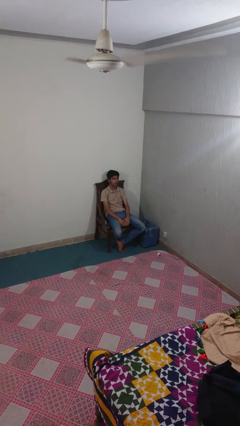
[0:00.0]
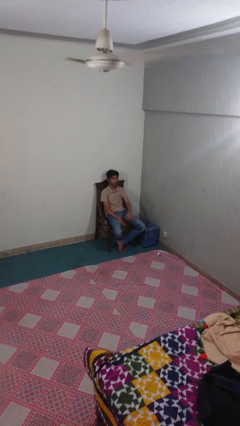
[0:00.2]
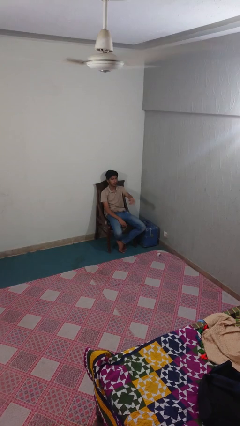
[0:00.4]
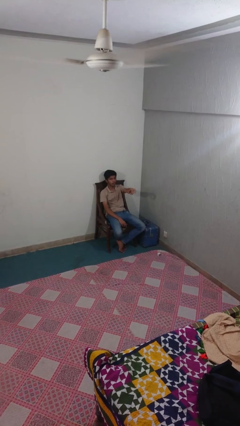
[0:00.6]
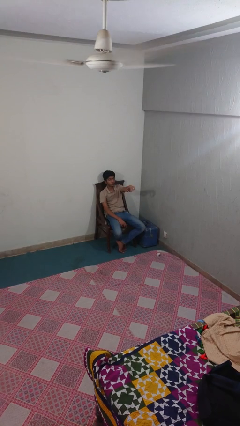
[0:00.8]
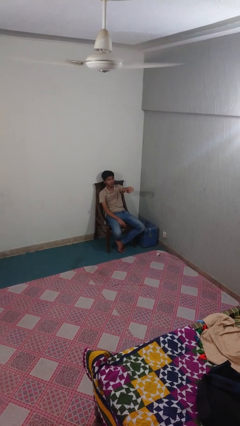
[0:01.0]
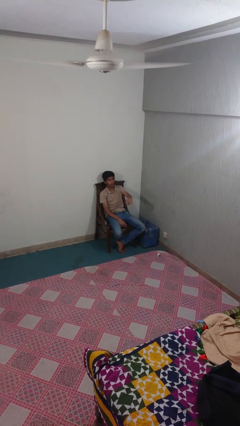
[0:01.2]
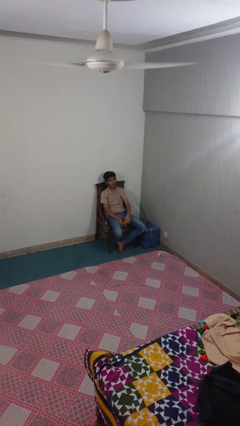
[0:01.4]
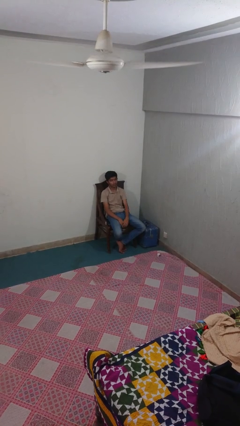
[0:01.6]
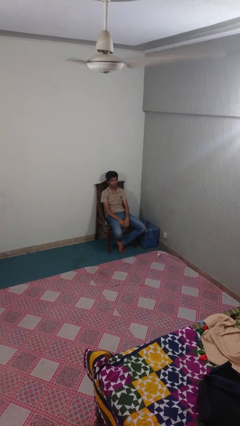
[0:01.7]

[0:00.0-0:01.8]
person points at person

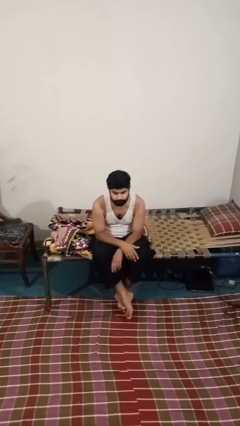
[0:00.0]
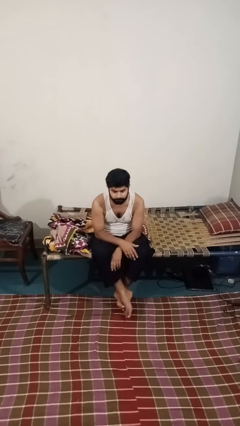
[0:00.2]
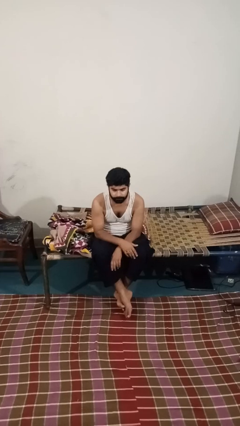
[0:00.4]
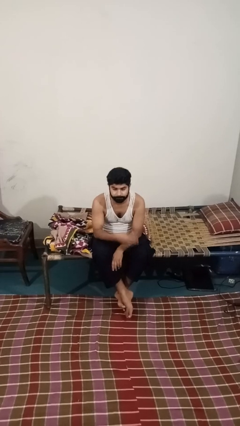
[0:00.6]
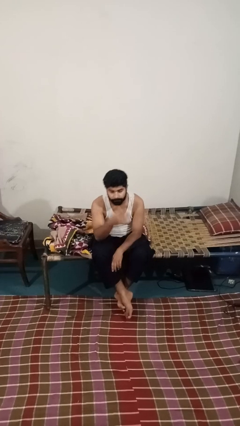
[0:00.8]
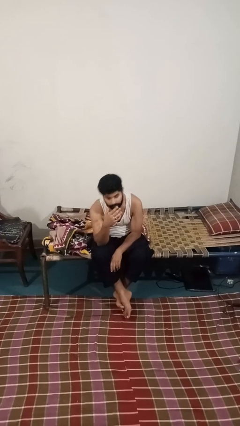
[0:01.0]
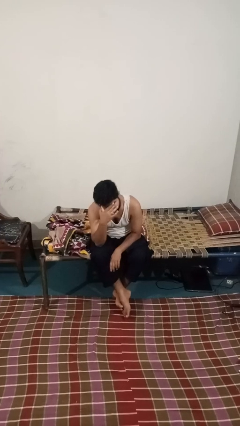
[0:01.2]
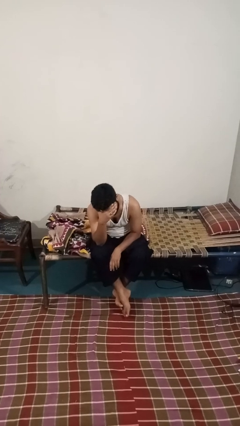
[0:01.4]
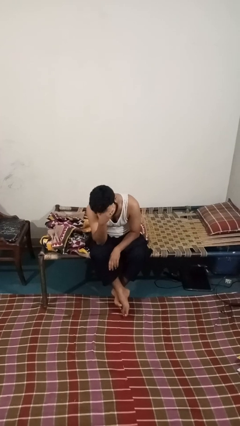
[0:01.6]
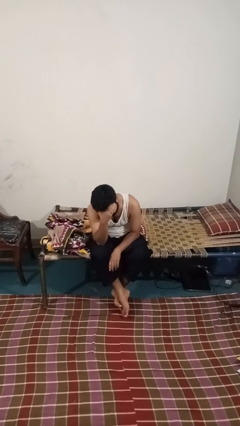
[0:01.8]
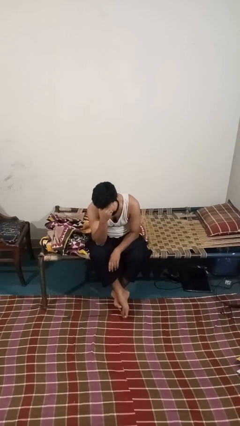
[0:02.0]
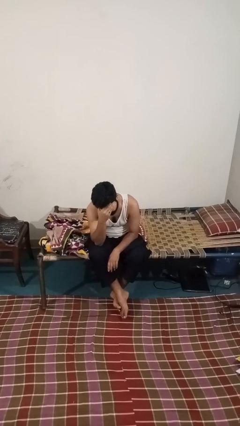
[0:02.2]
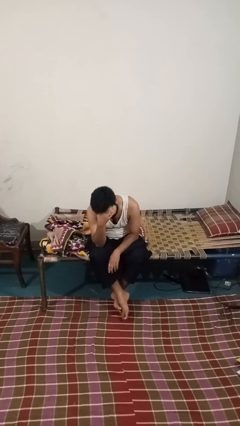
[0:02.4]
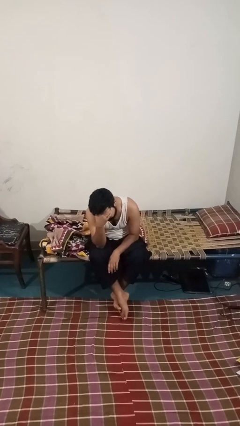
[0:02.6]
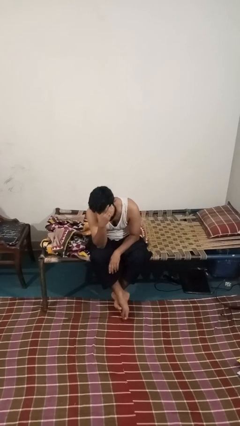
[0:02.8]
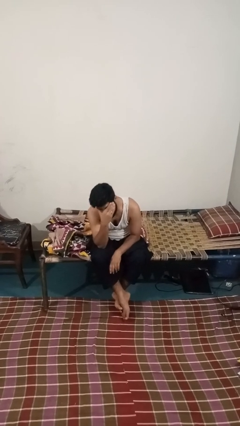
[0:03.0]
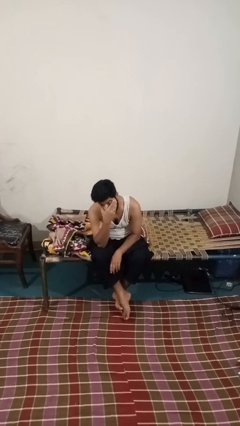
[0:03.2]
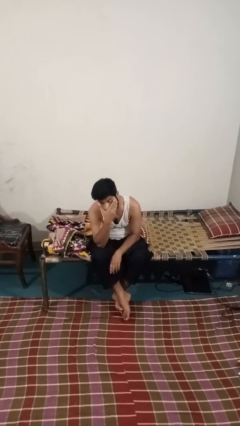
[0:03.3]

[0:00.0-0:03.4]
person covers face with hands

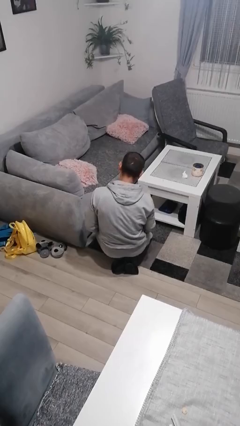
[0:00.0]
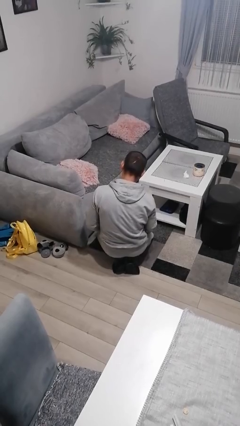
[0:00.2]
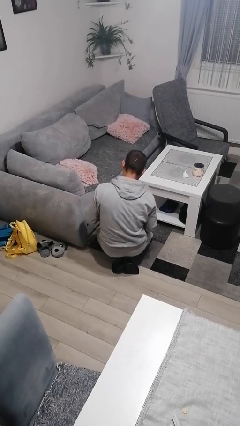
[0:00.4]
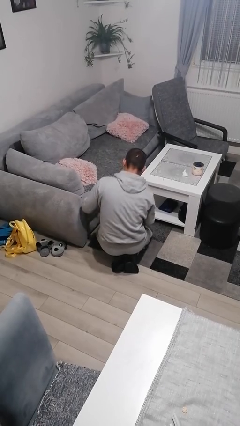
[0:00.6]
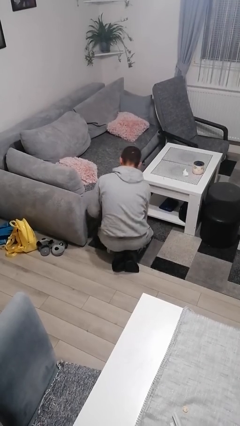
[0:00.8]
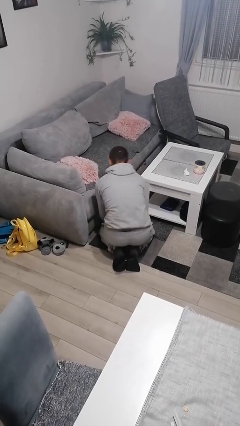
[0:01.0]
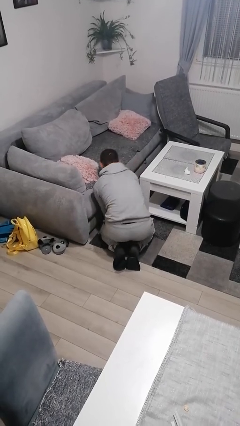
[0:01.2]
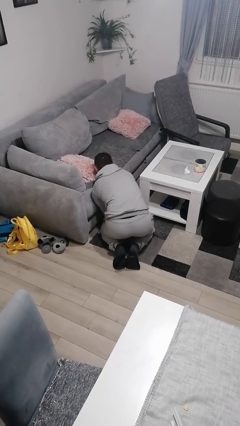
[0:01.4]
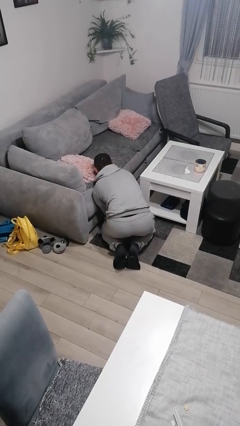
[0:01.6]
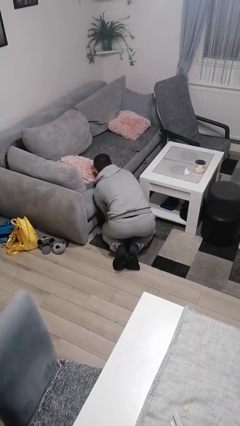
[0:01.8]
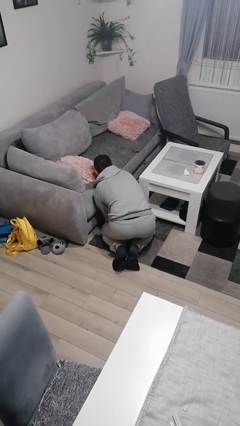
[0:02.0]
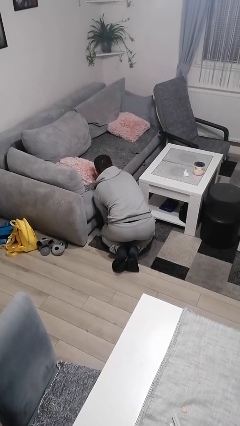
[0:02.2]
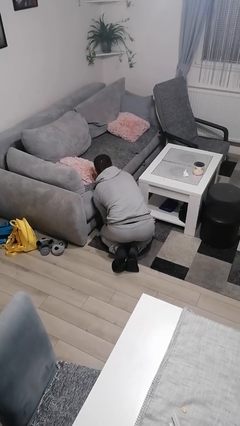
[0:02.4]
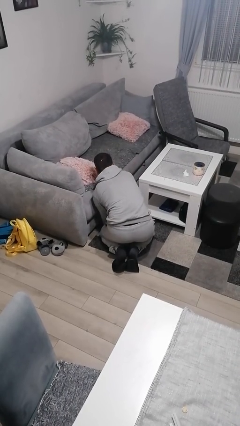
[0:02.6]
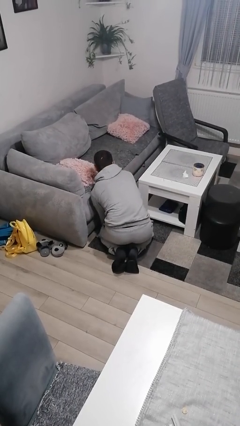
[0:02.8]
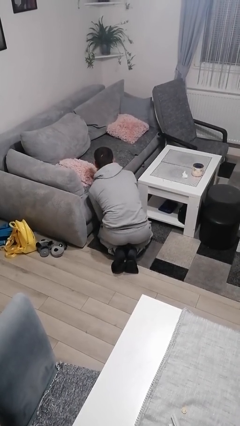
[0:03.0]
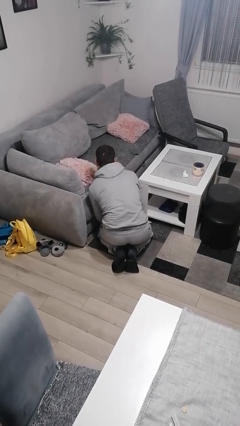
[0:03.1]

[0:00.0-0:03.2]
person searches under couch

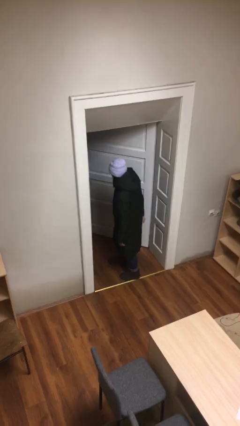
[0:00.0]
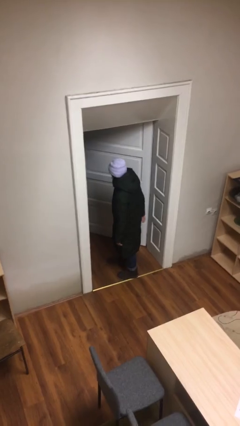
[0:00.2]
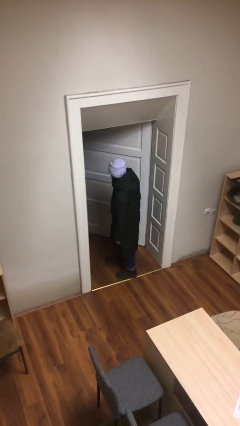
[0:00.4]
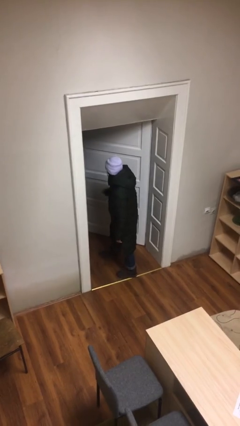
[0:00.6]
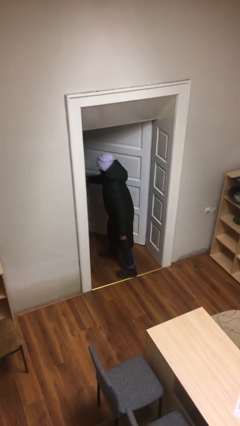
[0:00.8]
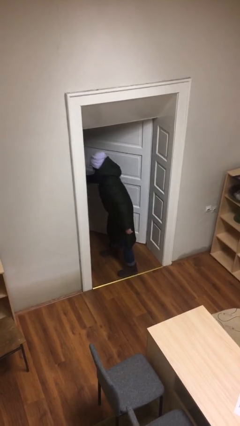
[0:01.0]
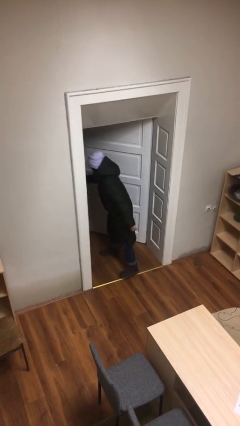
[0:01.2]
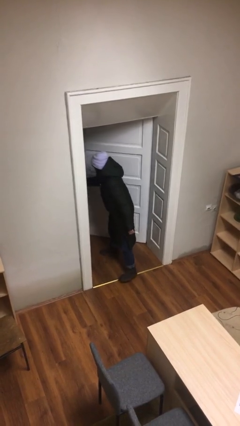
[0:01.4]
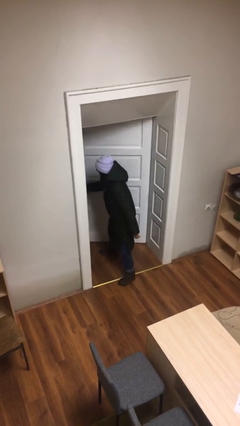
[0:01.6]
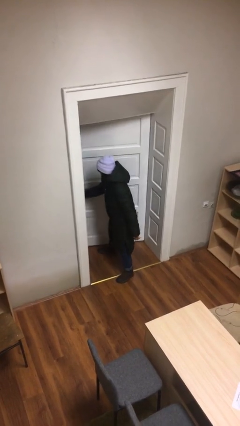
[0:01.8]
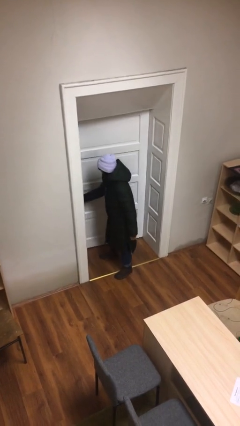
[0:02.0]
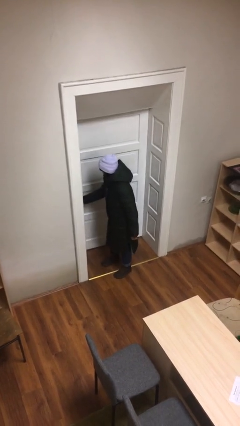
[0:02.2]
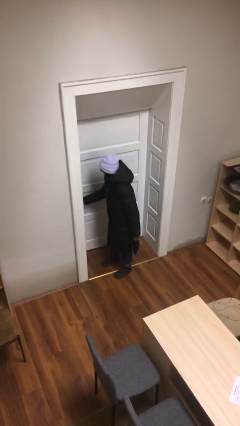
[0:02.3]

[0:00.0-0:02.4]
person closes facility door

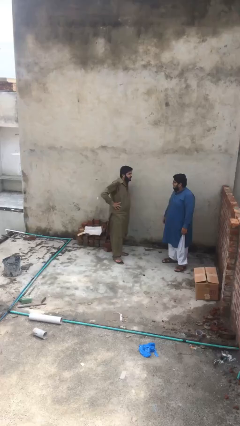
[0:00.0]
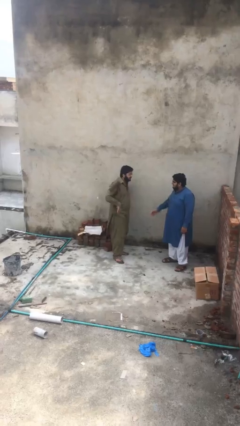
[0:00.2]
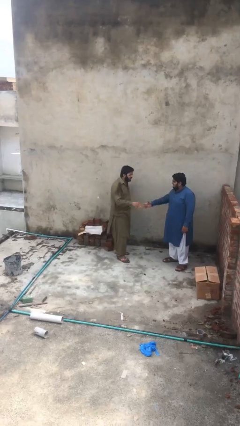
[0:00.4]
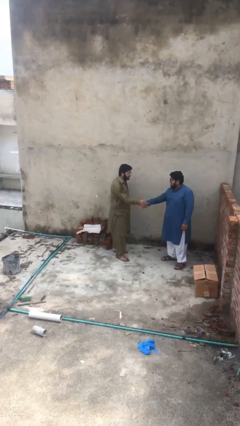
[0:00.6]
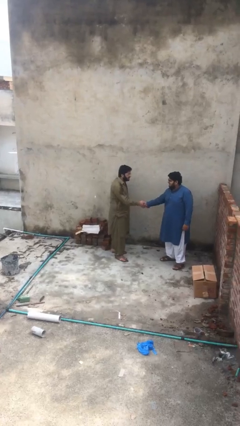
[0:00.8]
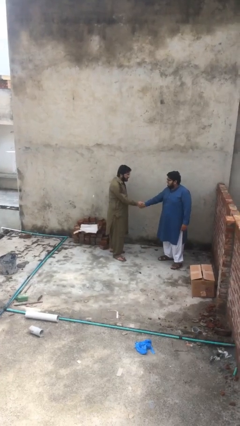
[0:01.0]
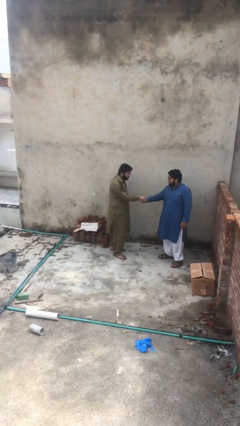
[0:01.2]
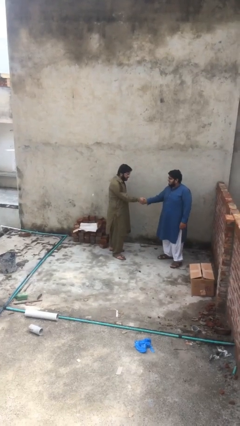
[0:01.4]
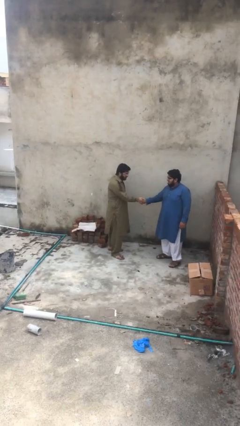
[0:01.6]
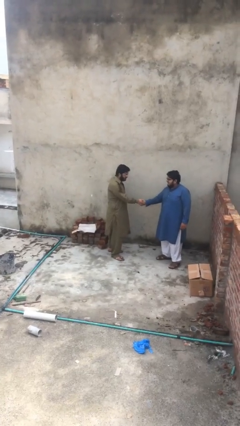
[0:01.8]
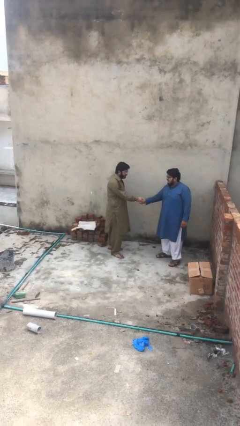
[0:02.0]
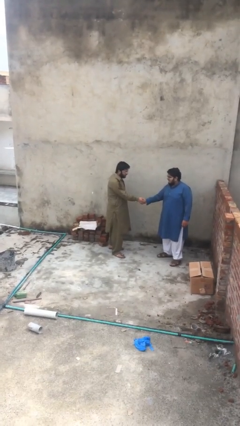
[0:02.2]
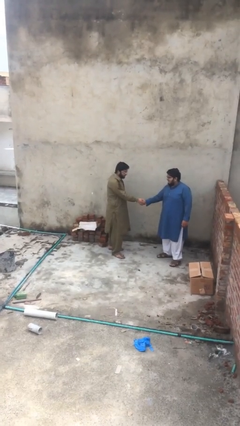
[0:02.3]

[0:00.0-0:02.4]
person shakes hand

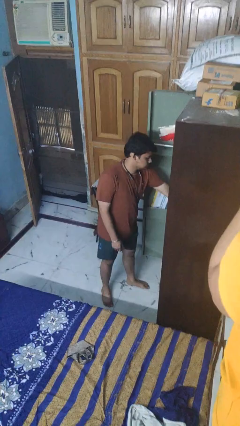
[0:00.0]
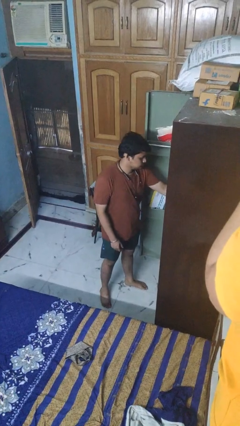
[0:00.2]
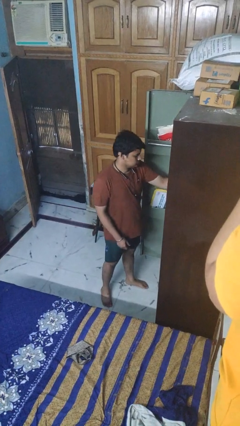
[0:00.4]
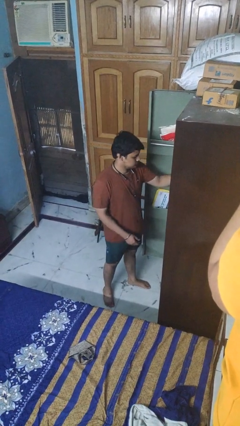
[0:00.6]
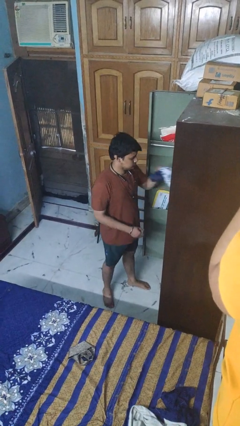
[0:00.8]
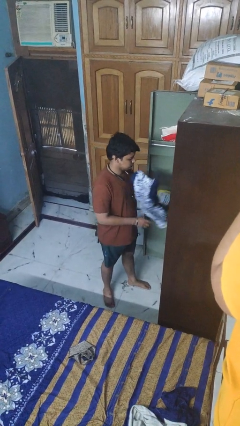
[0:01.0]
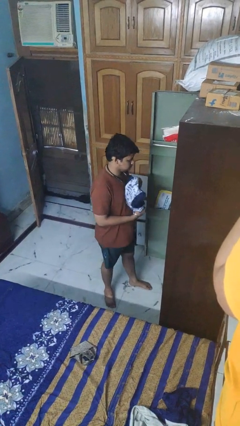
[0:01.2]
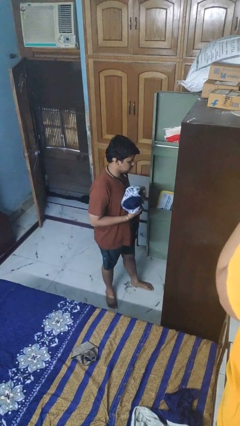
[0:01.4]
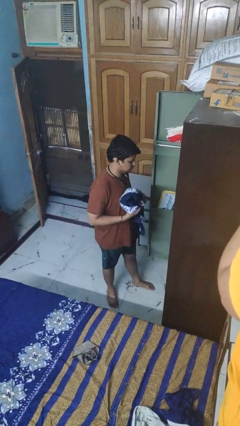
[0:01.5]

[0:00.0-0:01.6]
person takes clothes from dresser

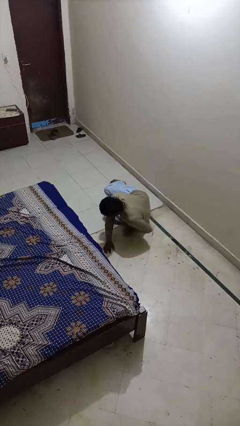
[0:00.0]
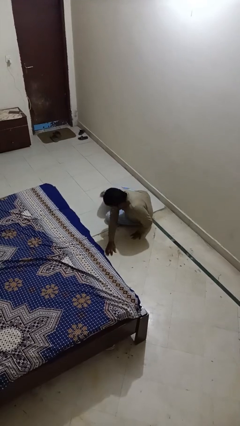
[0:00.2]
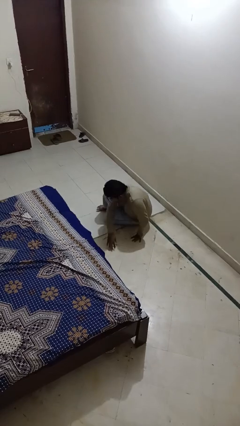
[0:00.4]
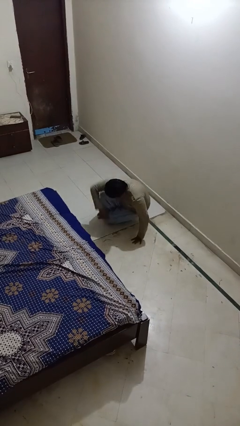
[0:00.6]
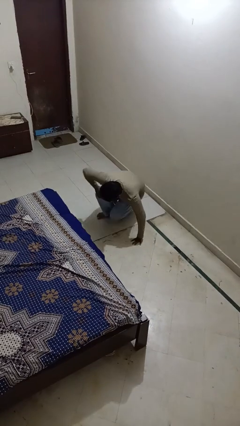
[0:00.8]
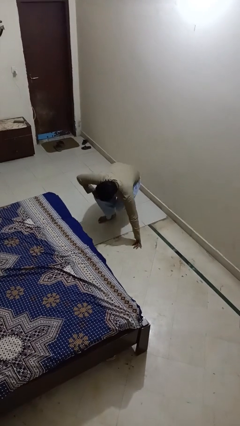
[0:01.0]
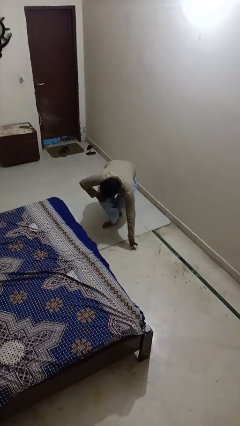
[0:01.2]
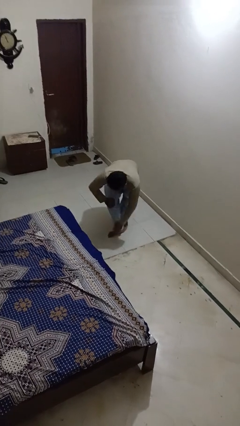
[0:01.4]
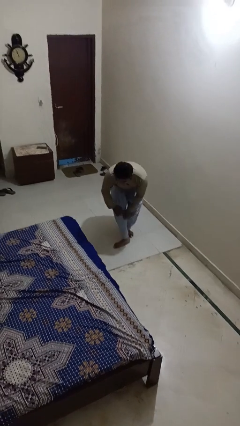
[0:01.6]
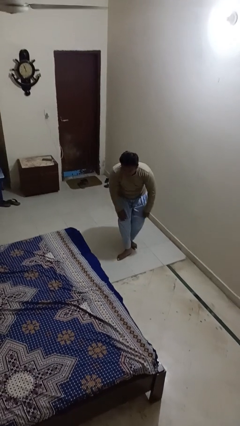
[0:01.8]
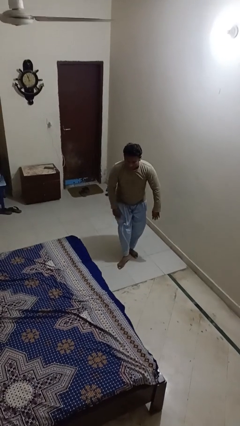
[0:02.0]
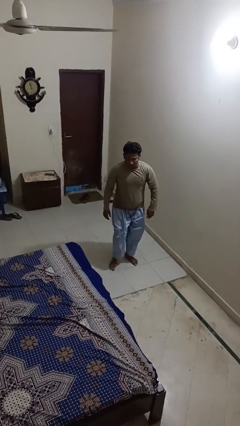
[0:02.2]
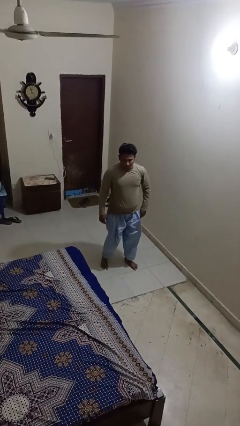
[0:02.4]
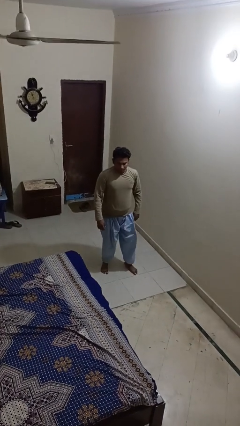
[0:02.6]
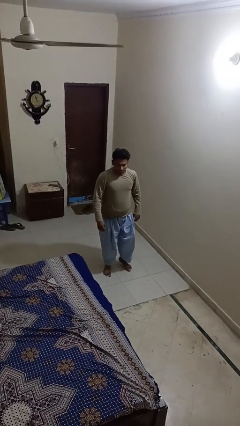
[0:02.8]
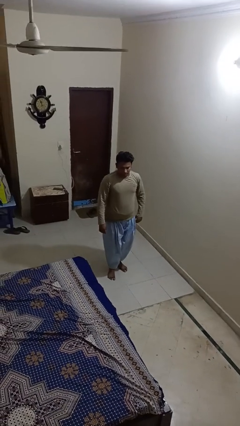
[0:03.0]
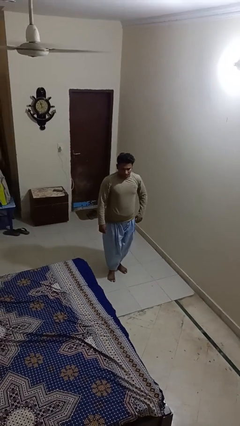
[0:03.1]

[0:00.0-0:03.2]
person stands up from floor
